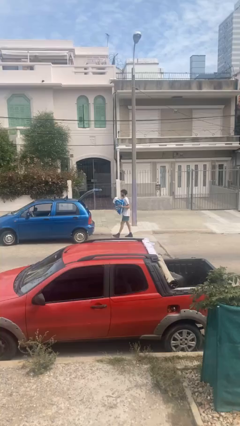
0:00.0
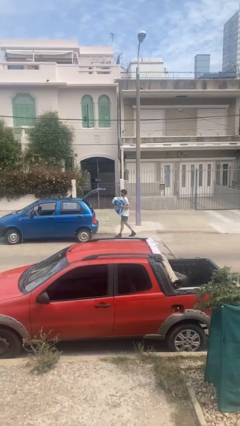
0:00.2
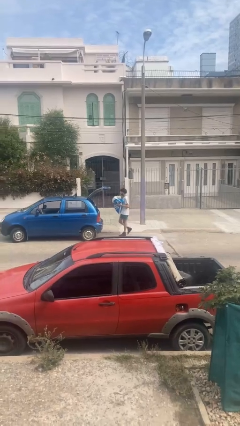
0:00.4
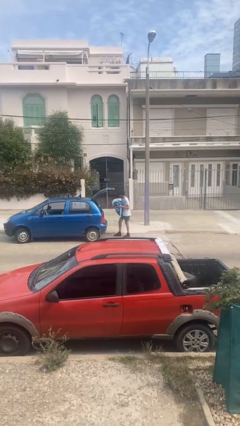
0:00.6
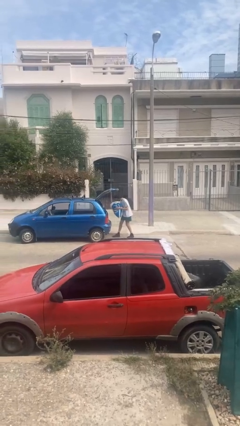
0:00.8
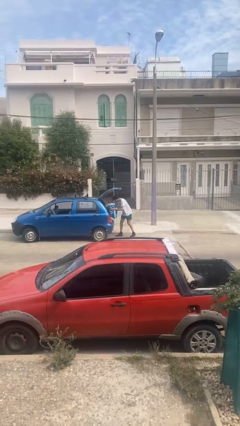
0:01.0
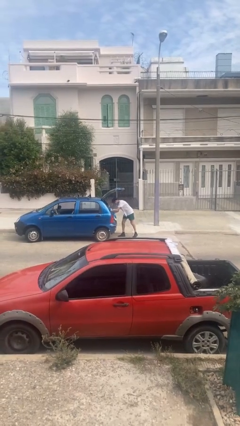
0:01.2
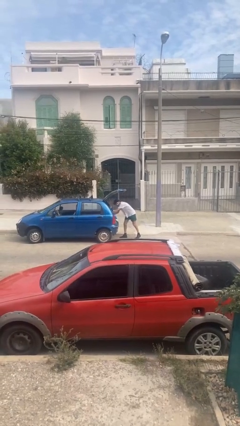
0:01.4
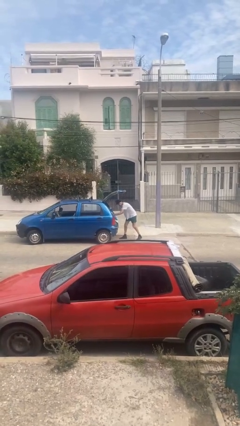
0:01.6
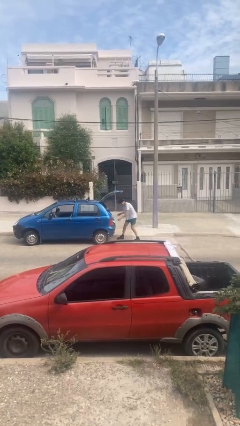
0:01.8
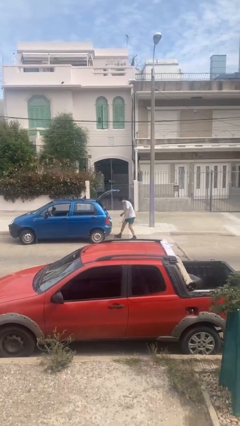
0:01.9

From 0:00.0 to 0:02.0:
person loads car

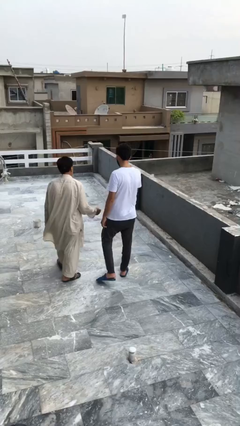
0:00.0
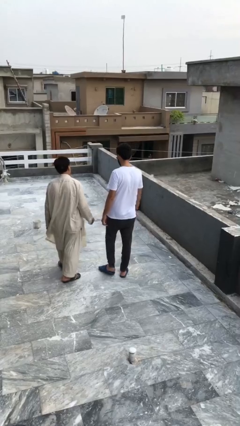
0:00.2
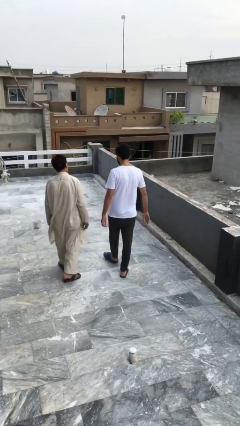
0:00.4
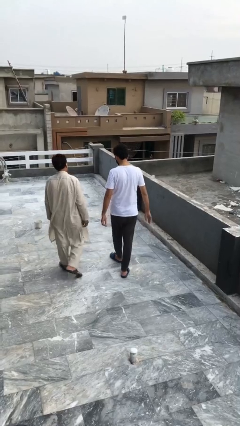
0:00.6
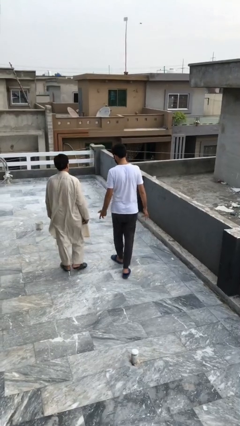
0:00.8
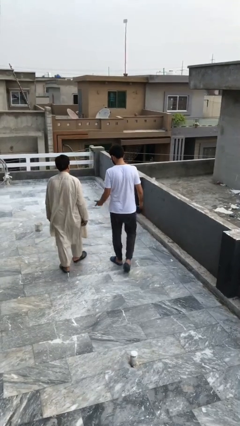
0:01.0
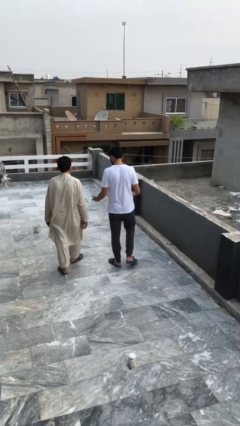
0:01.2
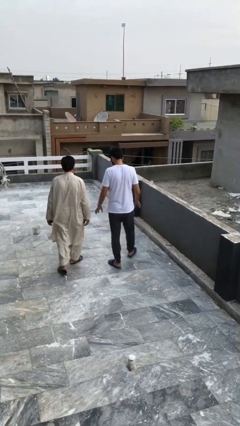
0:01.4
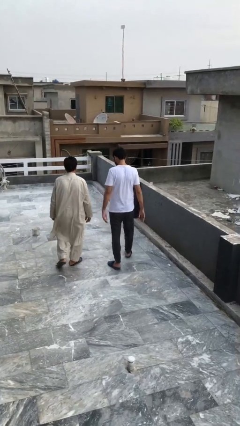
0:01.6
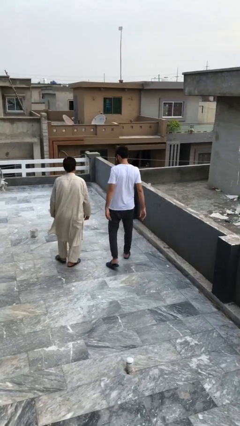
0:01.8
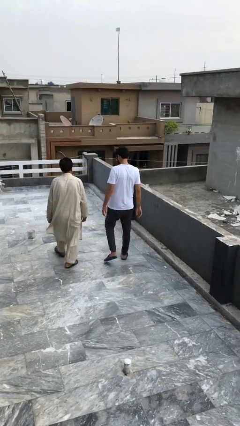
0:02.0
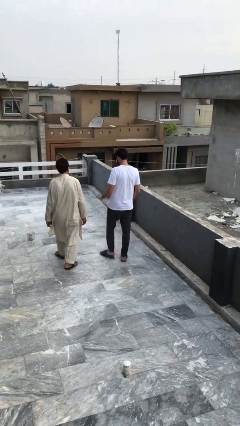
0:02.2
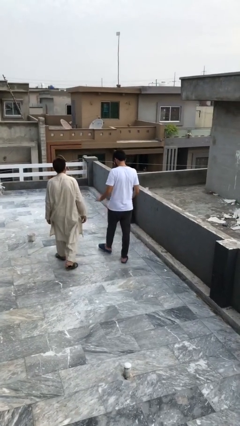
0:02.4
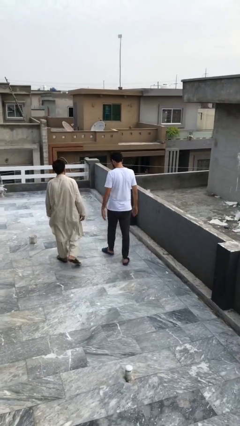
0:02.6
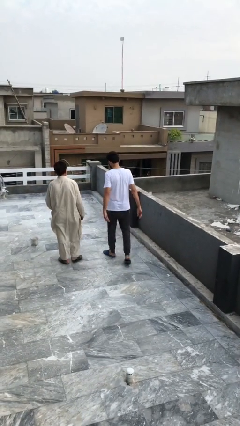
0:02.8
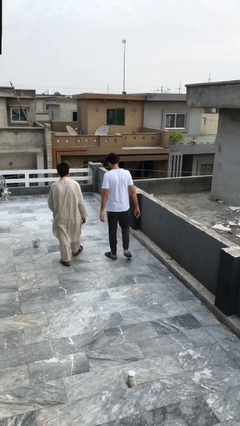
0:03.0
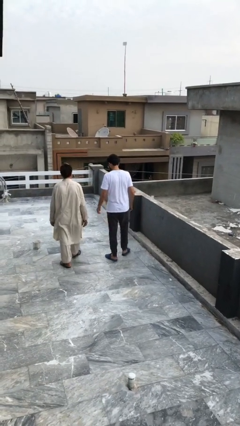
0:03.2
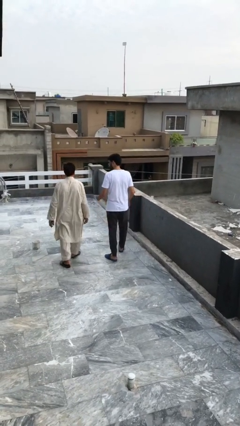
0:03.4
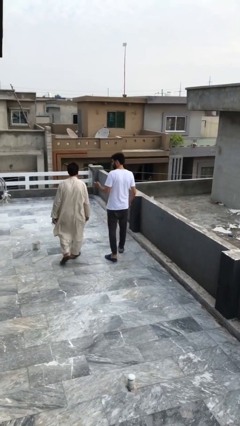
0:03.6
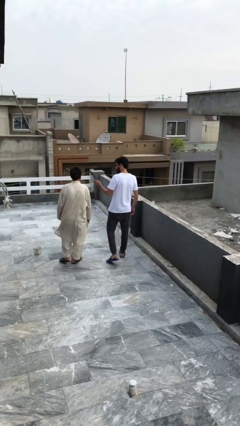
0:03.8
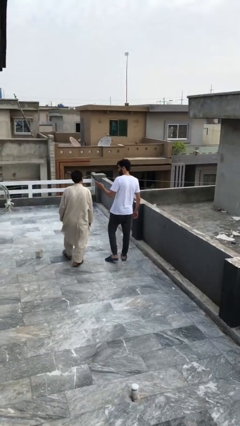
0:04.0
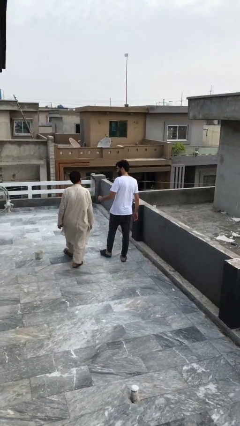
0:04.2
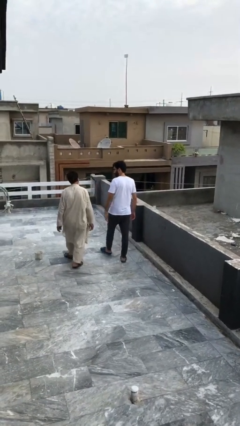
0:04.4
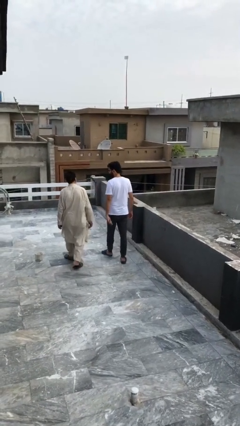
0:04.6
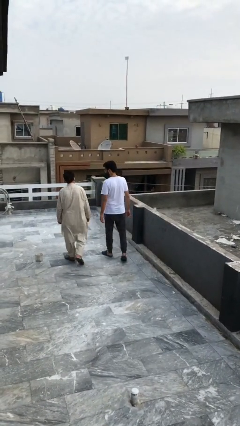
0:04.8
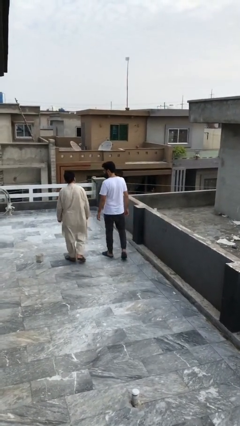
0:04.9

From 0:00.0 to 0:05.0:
person talks to person

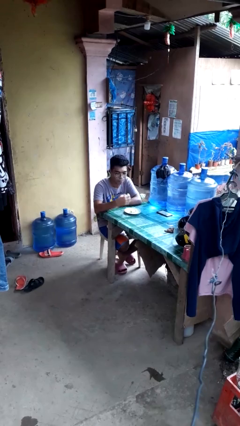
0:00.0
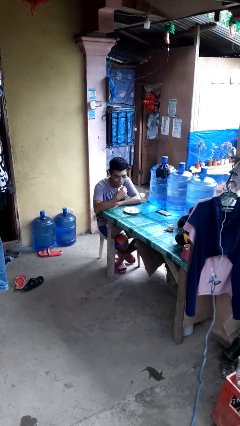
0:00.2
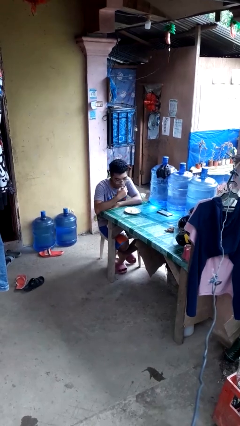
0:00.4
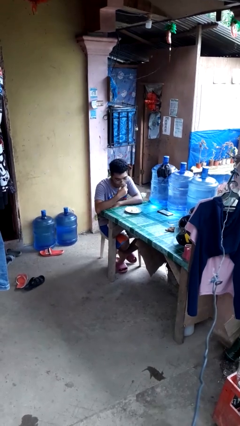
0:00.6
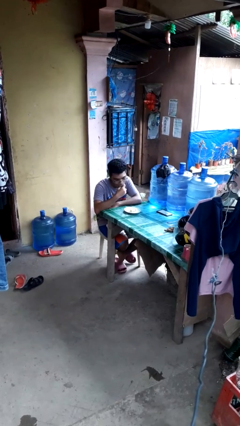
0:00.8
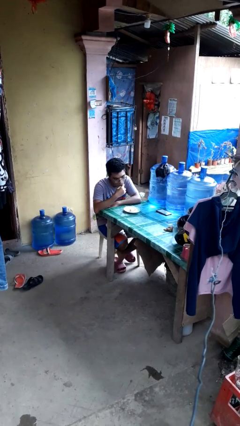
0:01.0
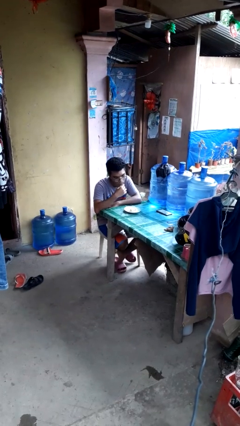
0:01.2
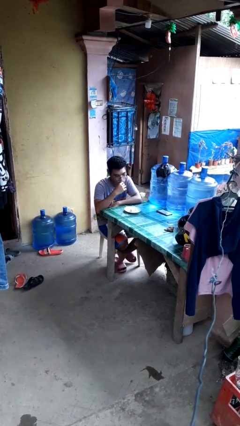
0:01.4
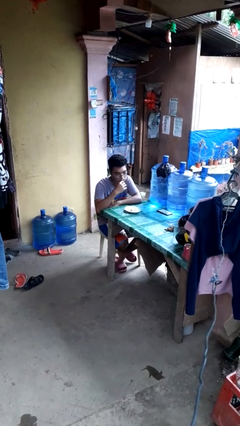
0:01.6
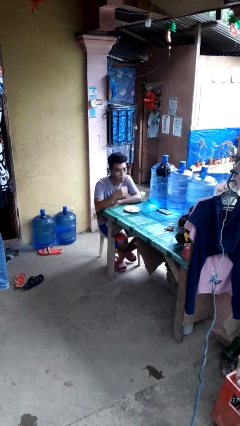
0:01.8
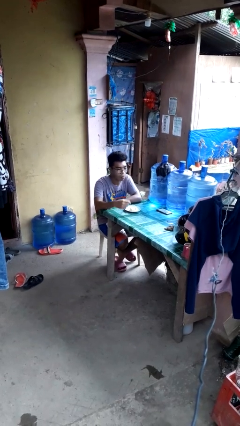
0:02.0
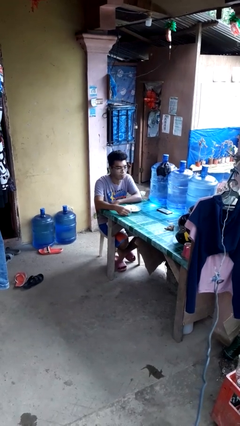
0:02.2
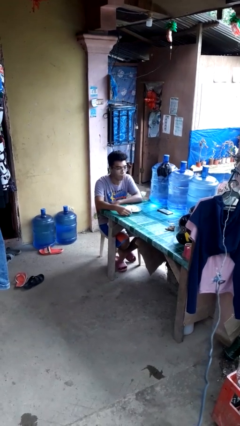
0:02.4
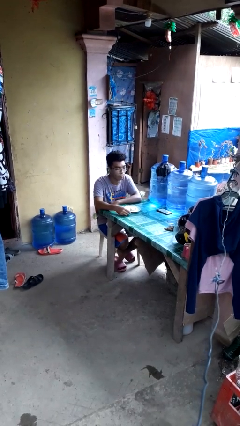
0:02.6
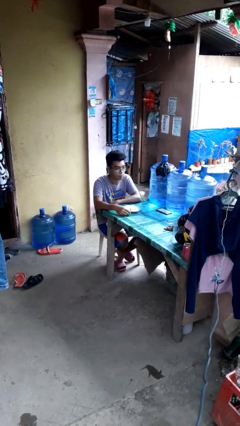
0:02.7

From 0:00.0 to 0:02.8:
person eats with hands

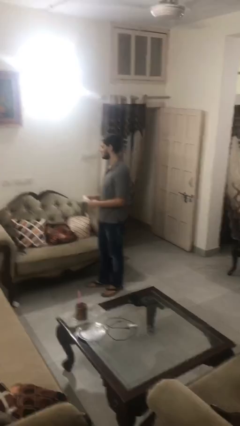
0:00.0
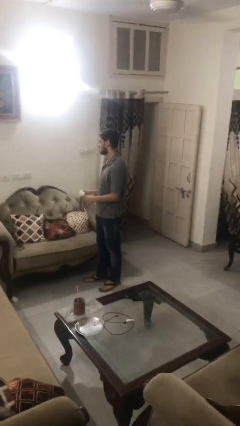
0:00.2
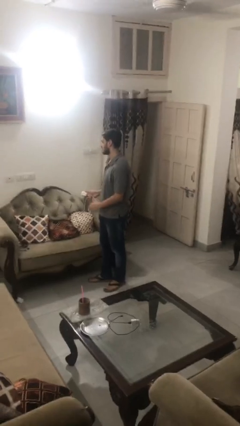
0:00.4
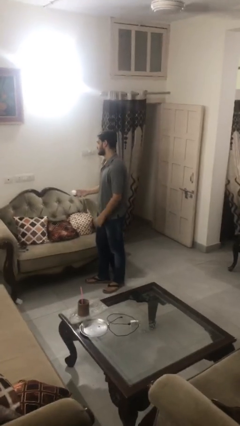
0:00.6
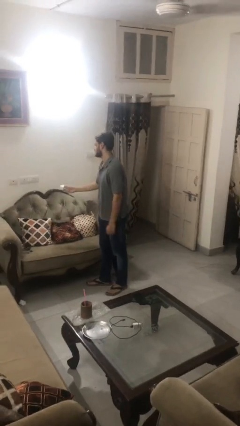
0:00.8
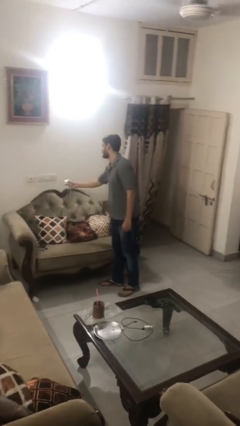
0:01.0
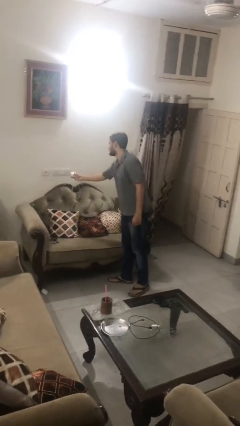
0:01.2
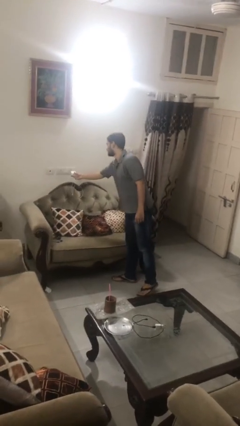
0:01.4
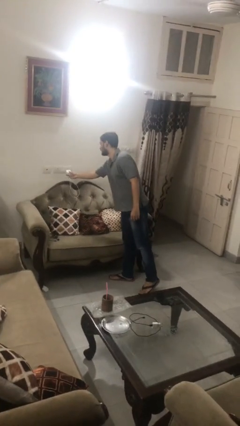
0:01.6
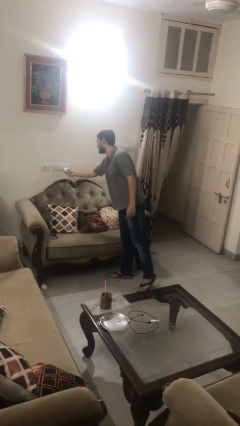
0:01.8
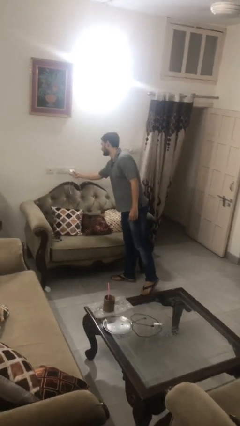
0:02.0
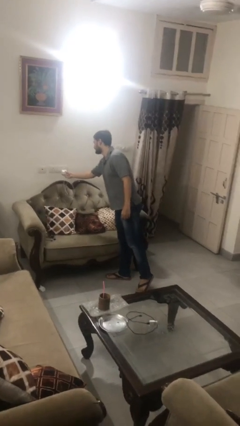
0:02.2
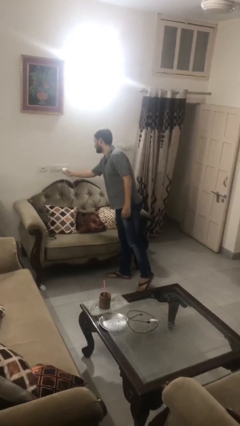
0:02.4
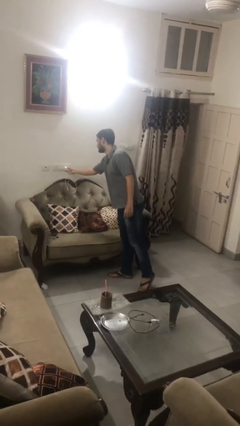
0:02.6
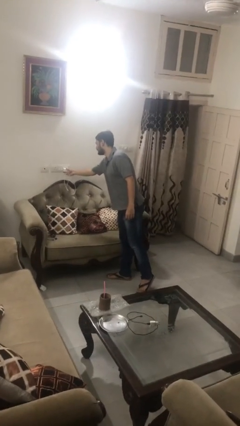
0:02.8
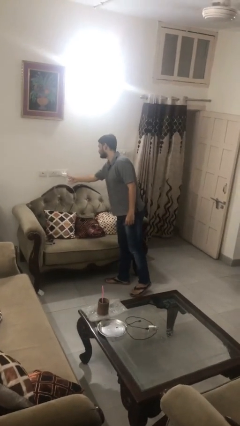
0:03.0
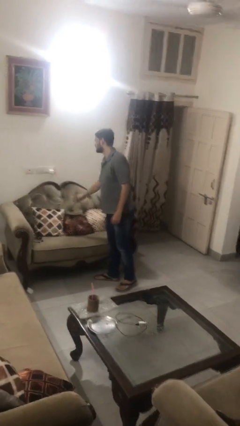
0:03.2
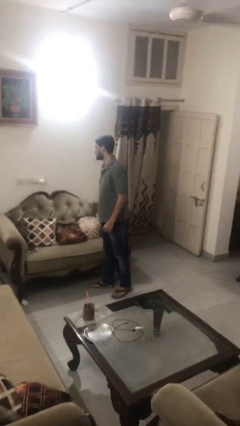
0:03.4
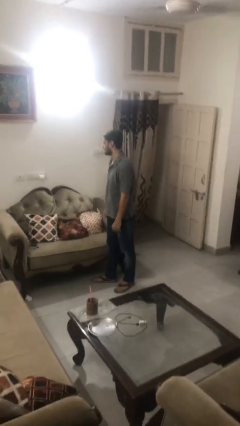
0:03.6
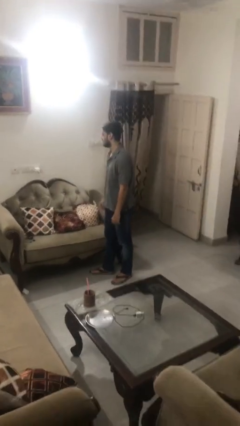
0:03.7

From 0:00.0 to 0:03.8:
person plugs into electrical socket

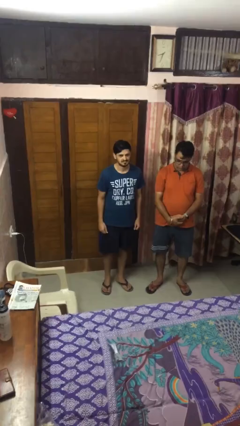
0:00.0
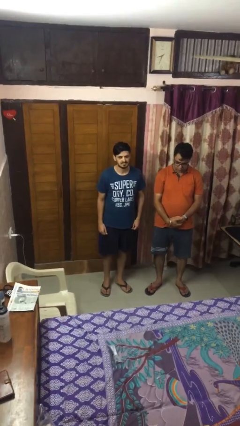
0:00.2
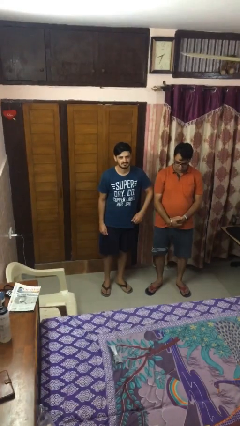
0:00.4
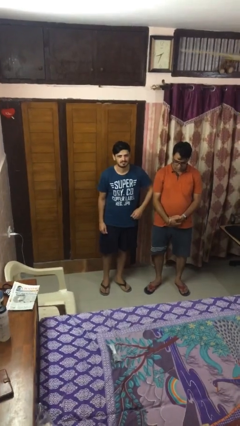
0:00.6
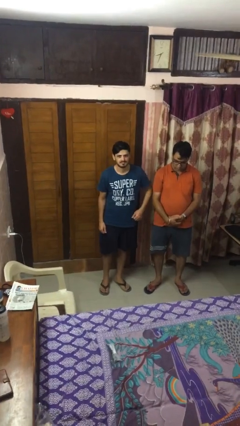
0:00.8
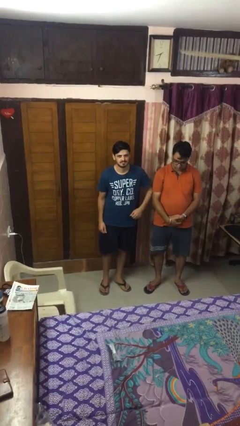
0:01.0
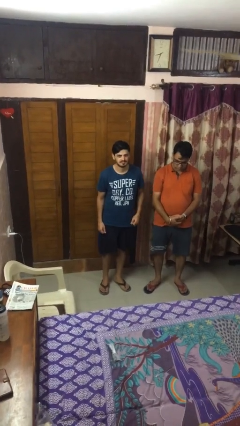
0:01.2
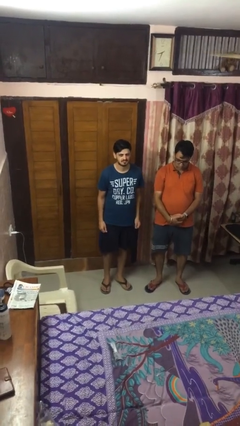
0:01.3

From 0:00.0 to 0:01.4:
person nudges person with elbow

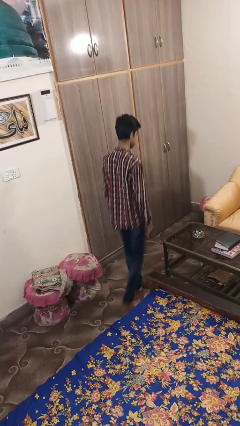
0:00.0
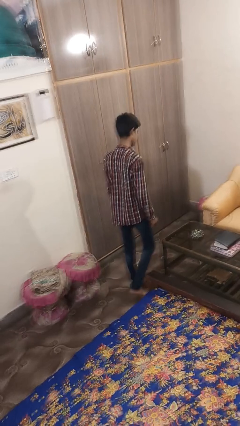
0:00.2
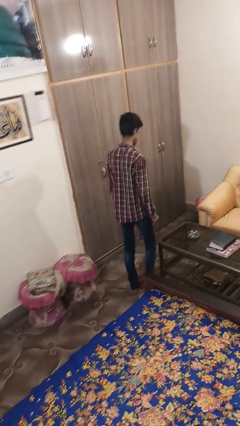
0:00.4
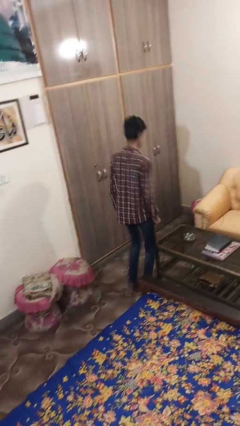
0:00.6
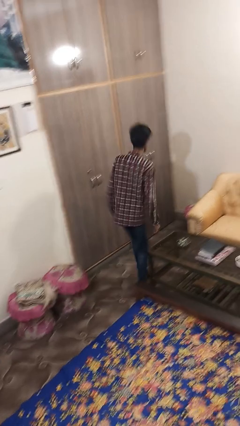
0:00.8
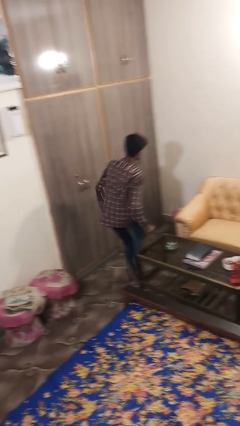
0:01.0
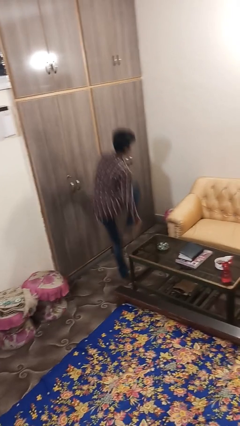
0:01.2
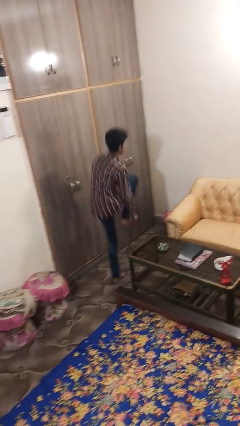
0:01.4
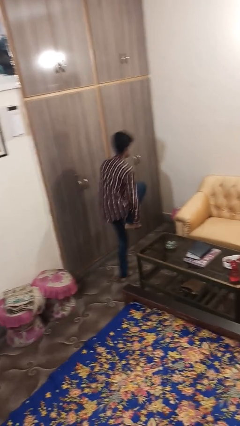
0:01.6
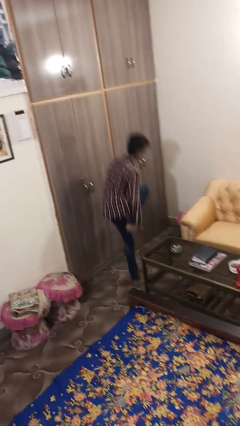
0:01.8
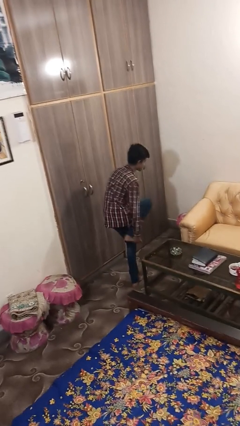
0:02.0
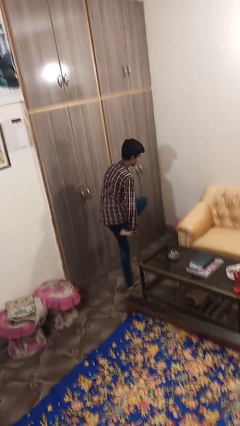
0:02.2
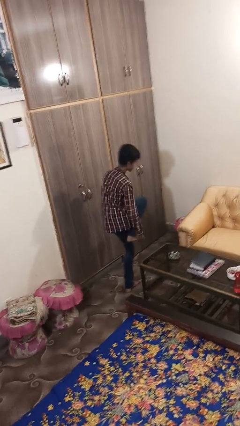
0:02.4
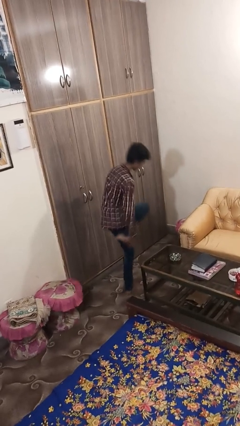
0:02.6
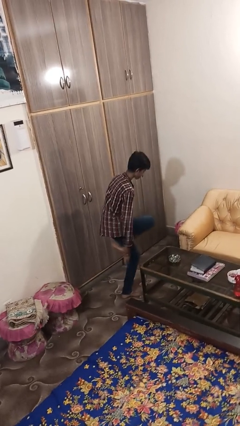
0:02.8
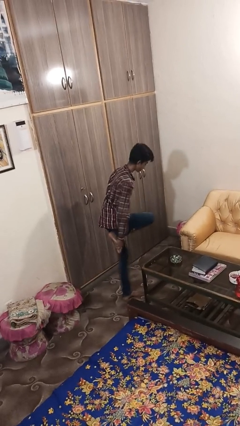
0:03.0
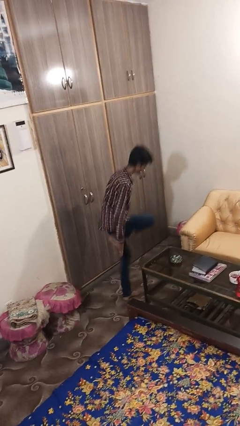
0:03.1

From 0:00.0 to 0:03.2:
person bumps into table
